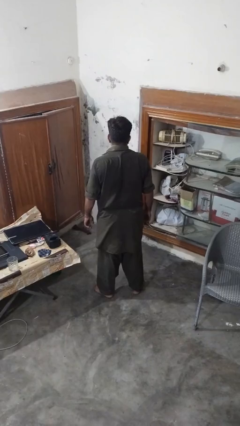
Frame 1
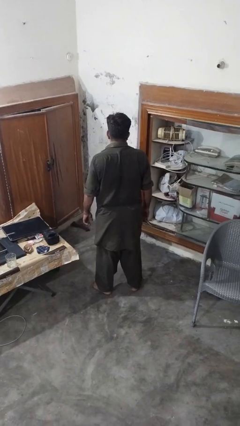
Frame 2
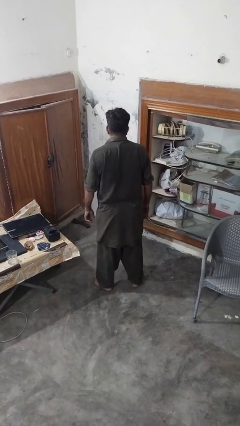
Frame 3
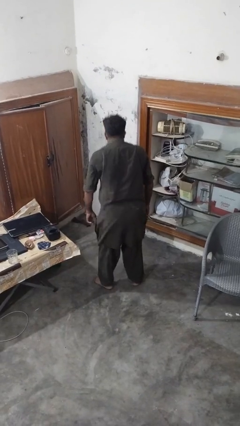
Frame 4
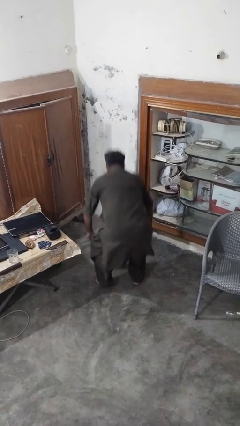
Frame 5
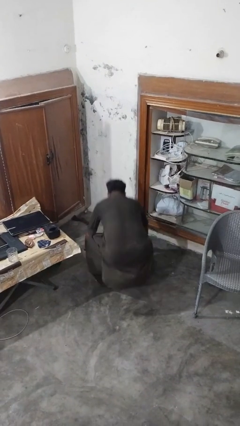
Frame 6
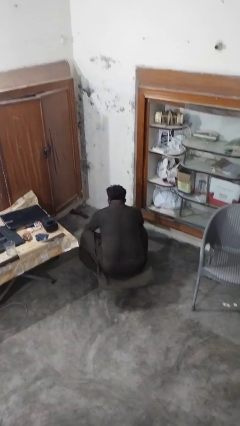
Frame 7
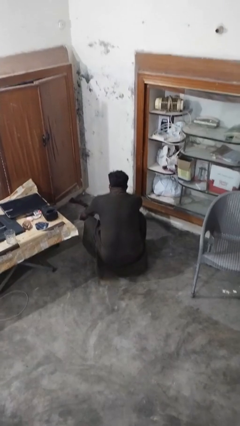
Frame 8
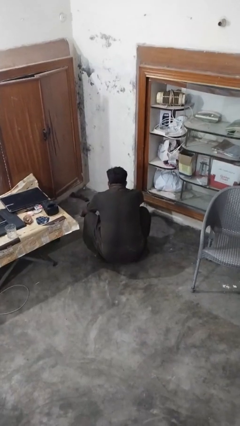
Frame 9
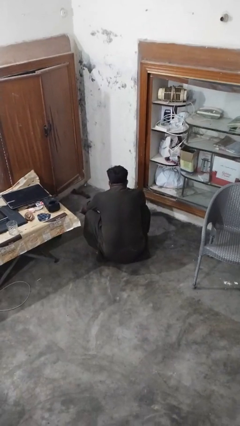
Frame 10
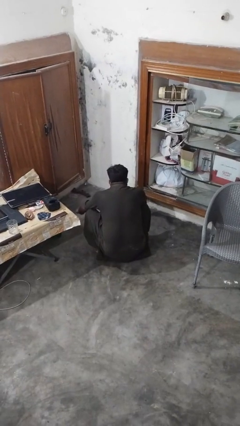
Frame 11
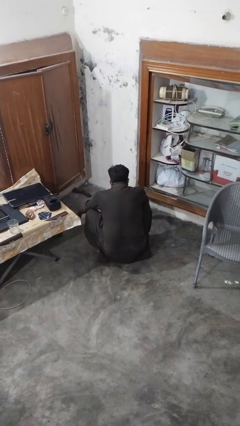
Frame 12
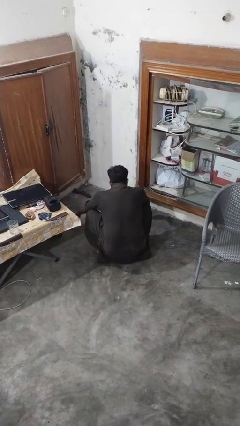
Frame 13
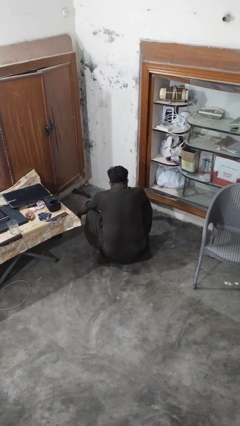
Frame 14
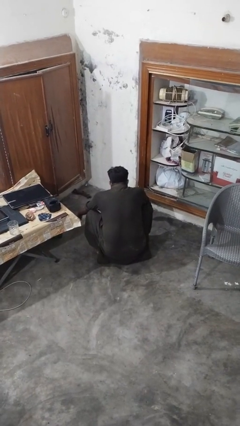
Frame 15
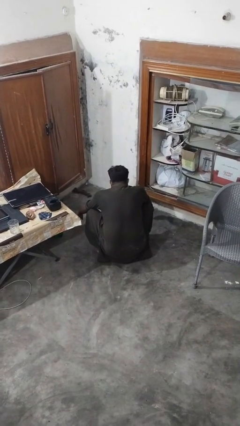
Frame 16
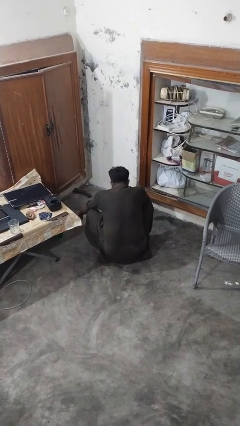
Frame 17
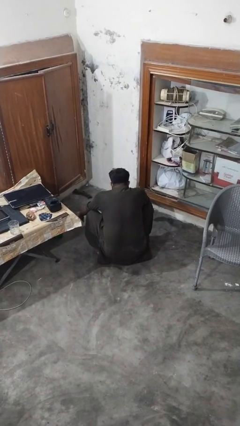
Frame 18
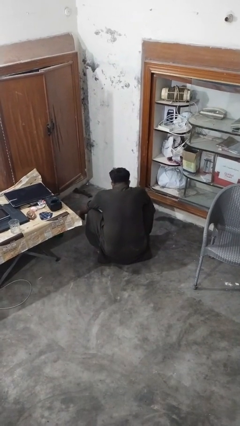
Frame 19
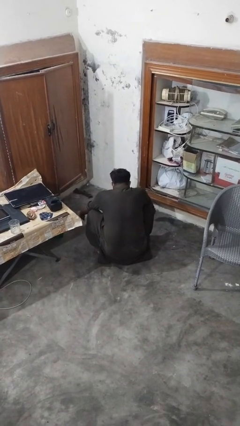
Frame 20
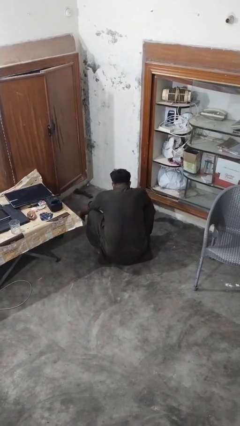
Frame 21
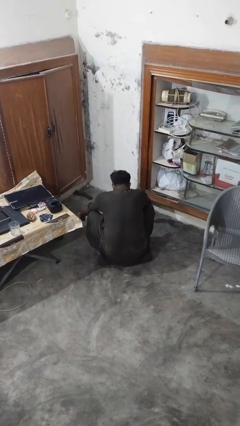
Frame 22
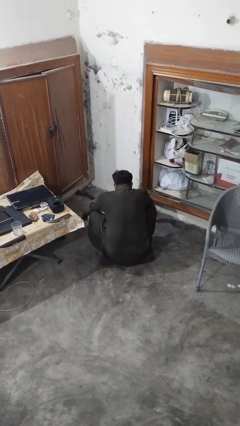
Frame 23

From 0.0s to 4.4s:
person squats

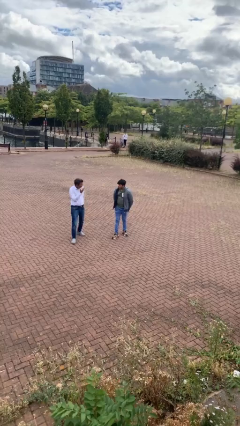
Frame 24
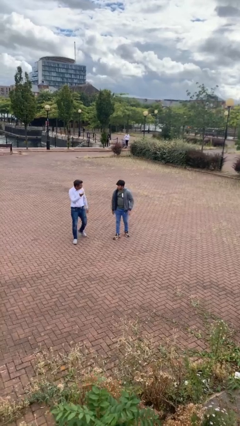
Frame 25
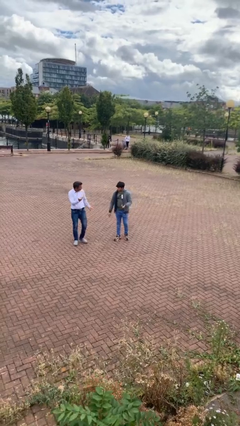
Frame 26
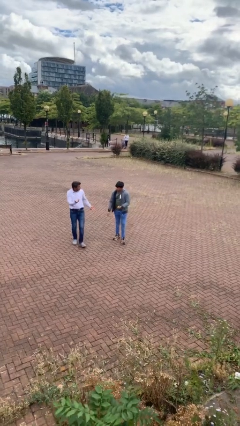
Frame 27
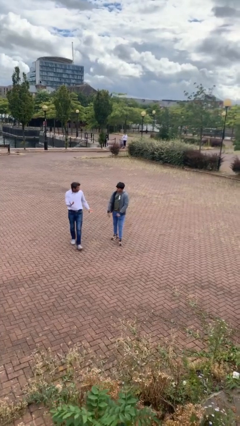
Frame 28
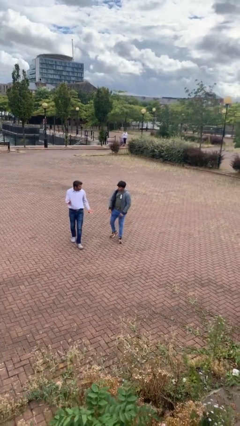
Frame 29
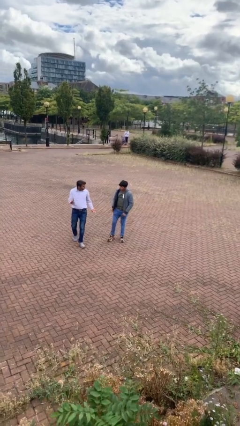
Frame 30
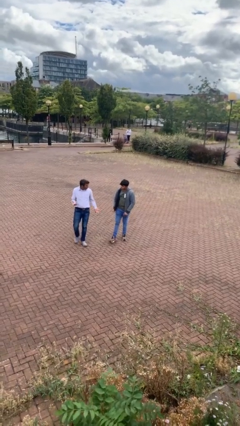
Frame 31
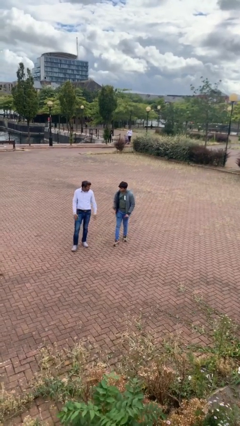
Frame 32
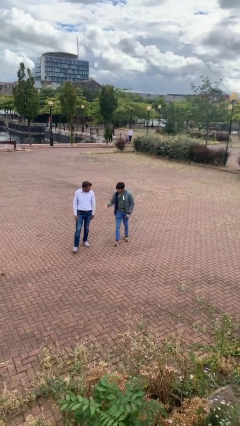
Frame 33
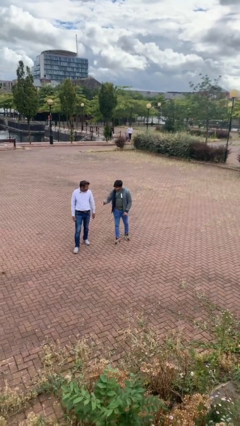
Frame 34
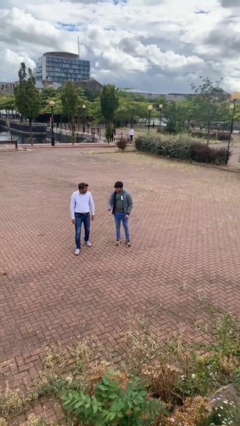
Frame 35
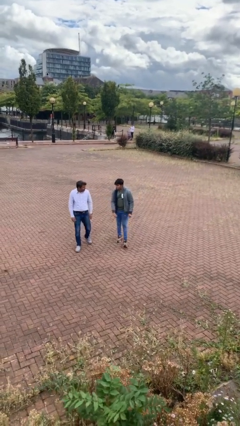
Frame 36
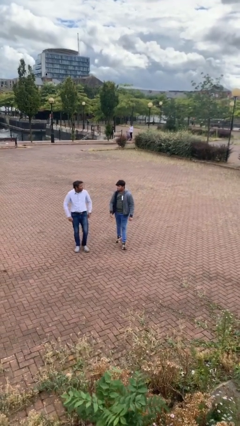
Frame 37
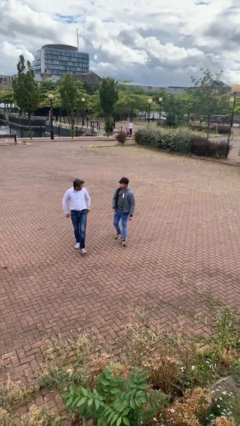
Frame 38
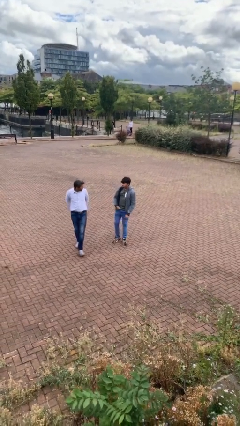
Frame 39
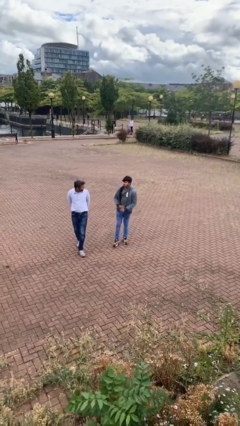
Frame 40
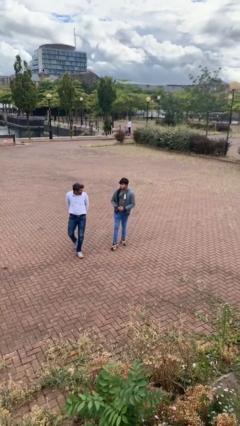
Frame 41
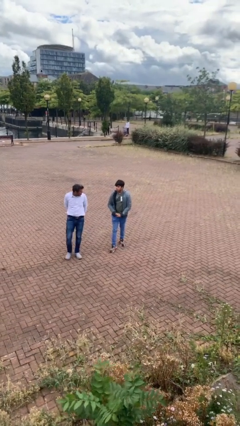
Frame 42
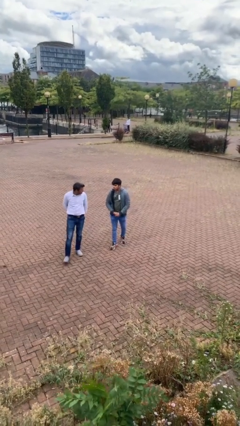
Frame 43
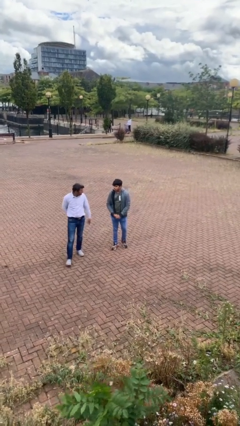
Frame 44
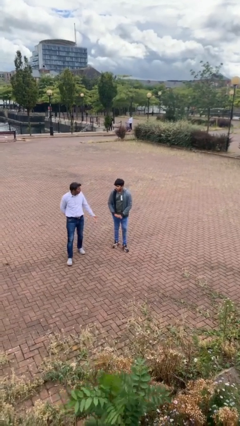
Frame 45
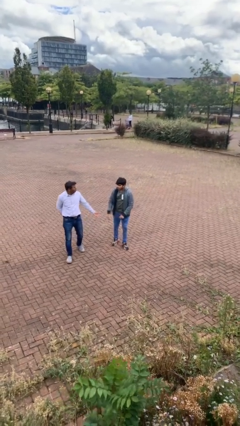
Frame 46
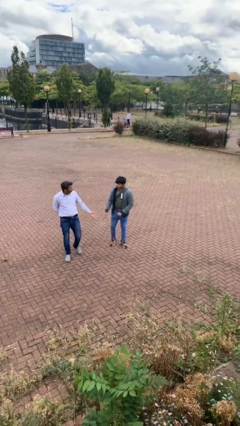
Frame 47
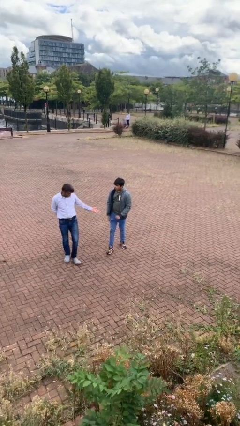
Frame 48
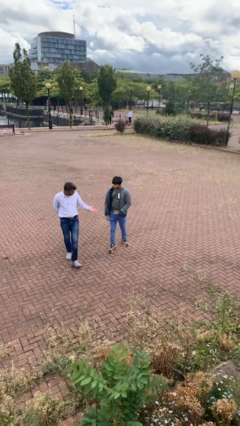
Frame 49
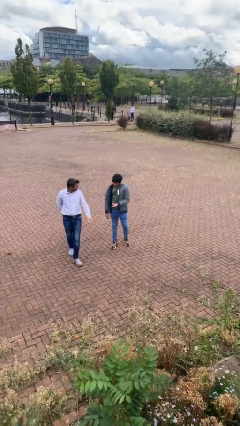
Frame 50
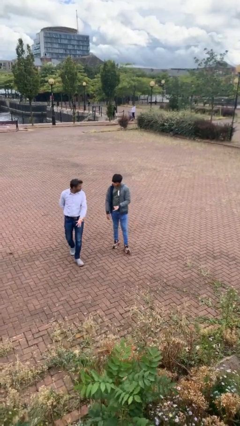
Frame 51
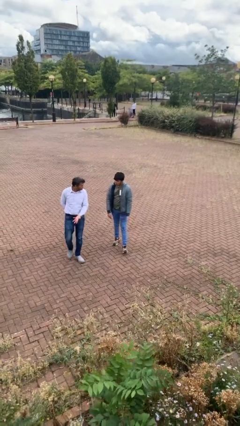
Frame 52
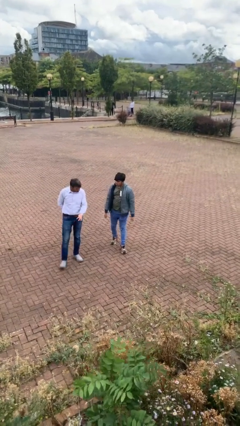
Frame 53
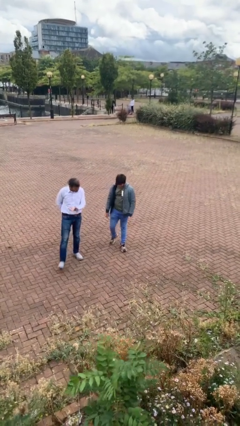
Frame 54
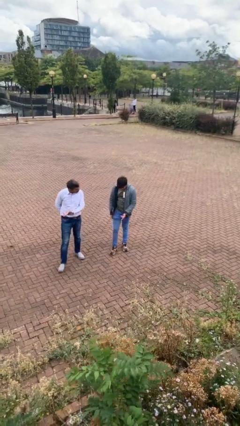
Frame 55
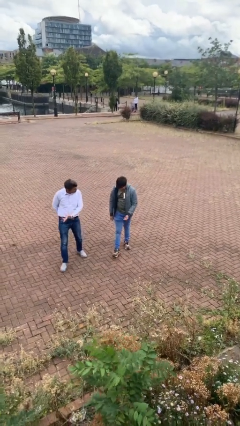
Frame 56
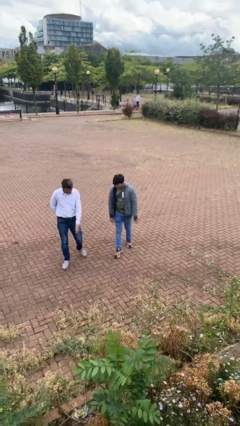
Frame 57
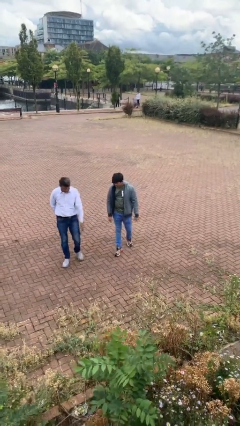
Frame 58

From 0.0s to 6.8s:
person talks to person

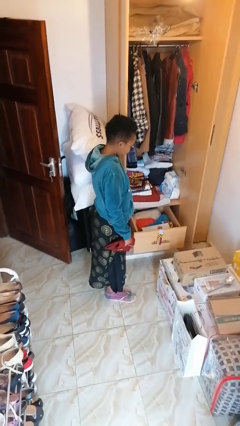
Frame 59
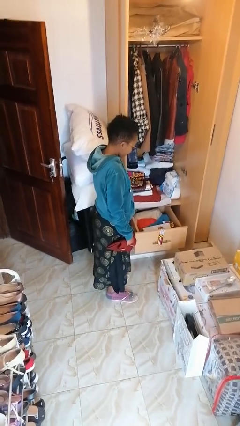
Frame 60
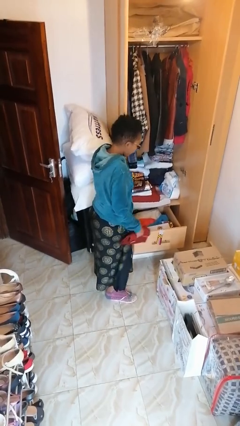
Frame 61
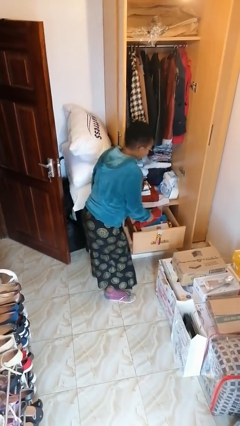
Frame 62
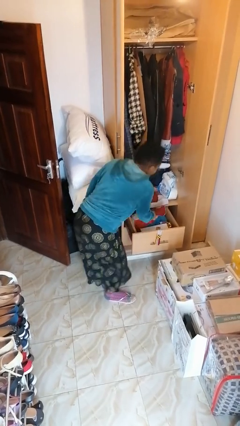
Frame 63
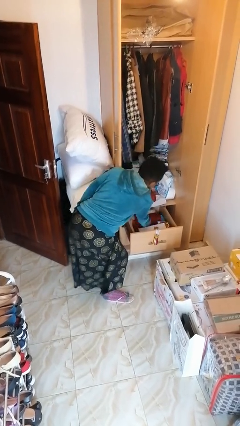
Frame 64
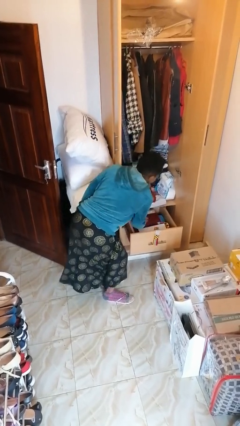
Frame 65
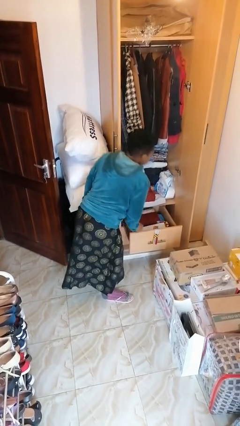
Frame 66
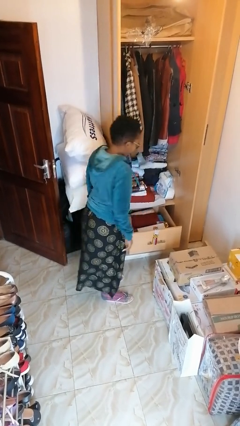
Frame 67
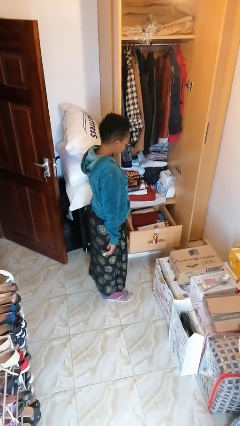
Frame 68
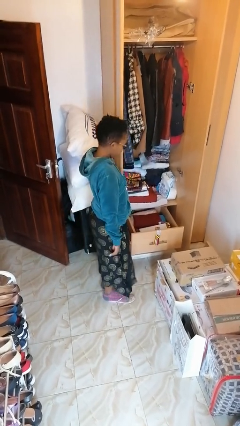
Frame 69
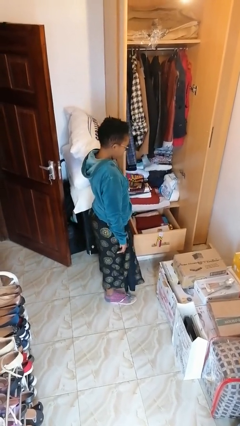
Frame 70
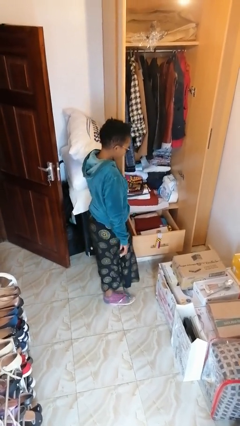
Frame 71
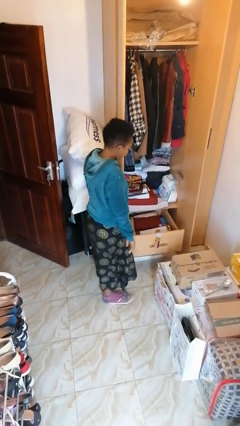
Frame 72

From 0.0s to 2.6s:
person puts clothes into dresser

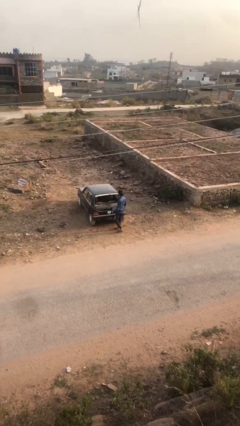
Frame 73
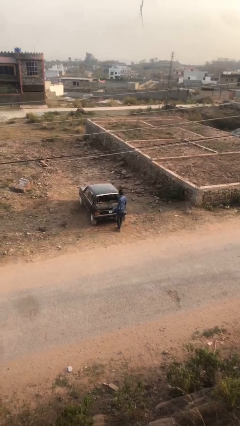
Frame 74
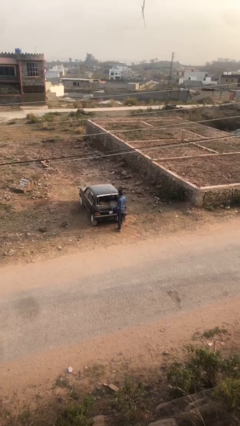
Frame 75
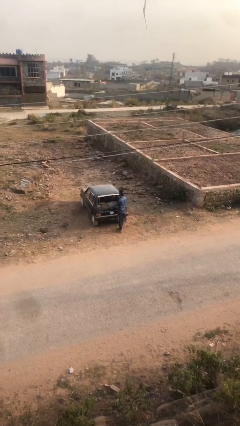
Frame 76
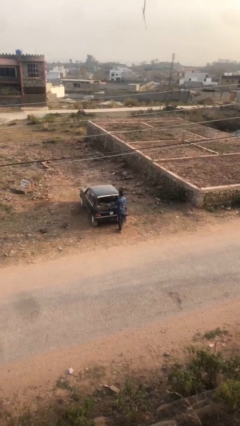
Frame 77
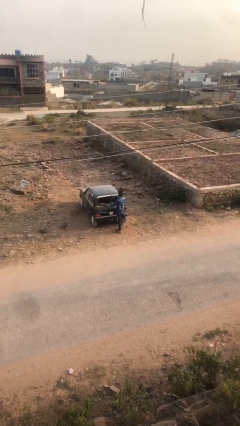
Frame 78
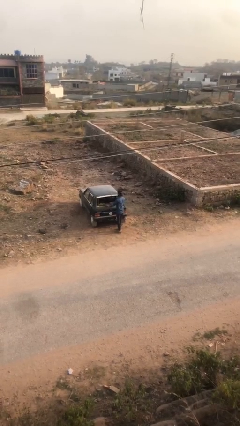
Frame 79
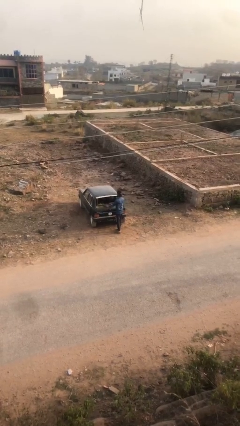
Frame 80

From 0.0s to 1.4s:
person loads car

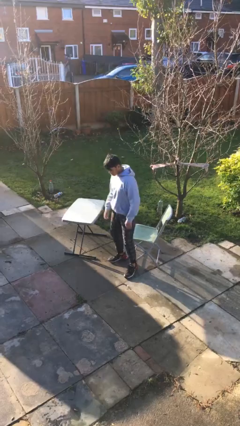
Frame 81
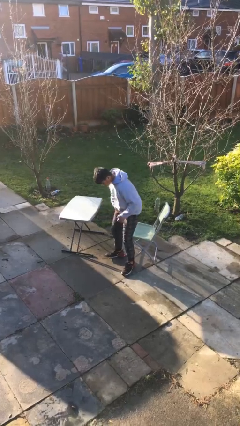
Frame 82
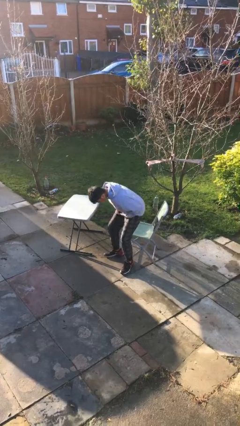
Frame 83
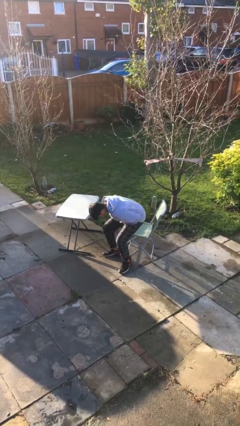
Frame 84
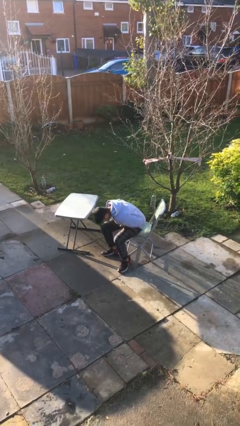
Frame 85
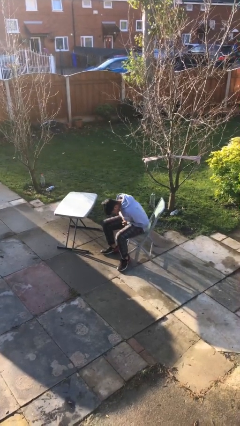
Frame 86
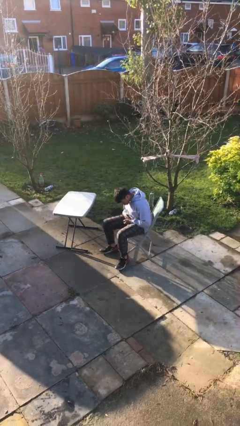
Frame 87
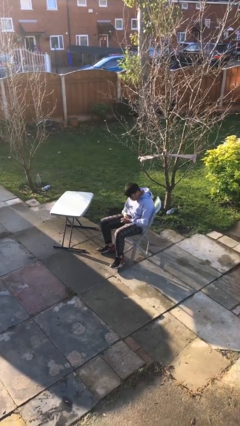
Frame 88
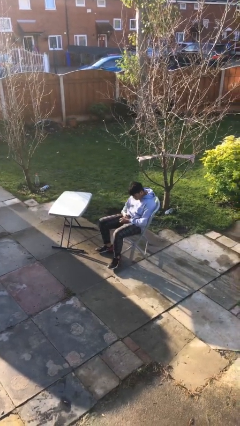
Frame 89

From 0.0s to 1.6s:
person sits down

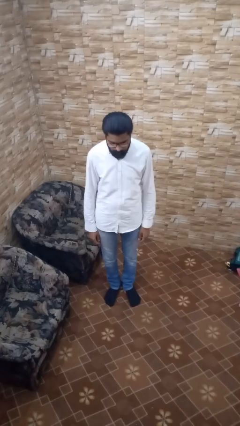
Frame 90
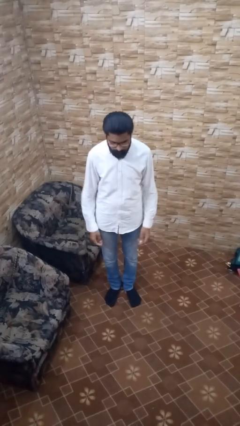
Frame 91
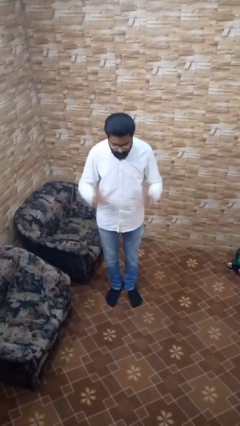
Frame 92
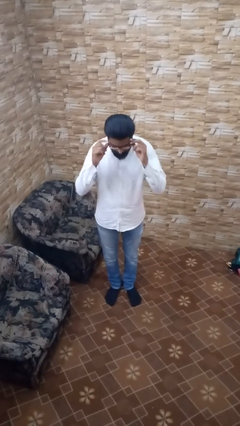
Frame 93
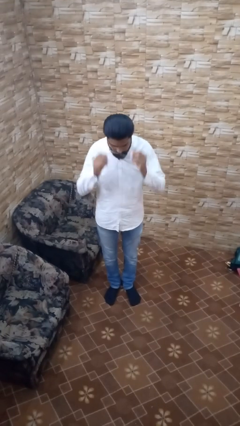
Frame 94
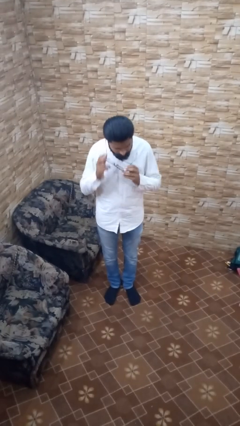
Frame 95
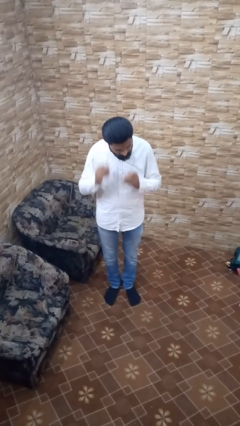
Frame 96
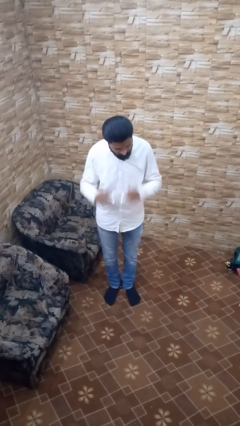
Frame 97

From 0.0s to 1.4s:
person takes off glasses
